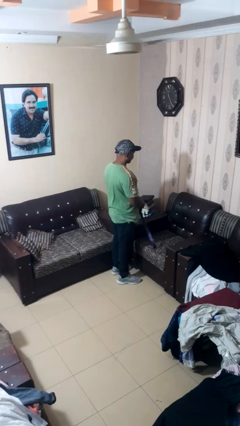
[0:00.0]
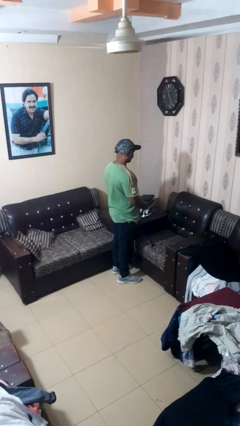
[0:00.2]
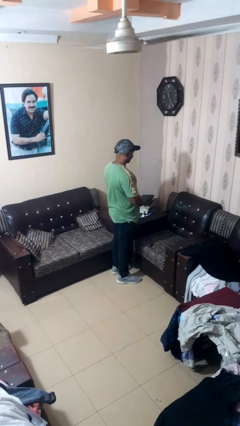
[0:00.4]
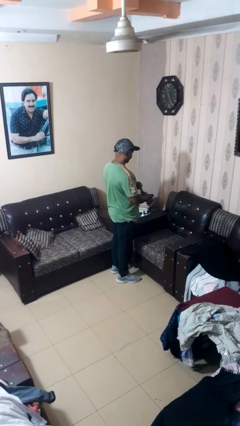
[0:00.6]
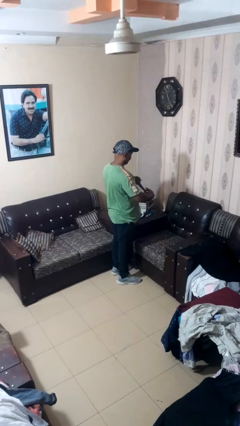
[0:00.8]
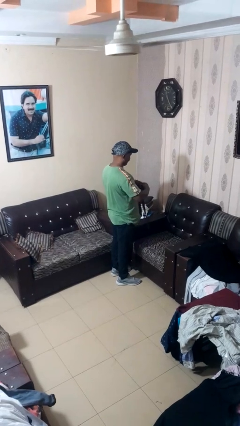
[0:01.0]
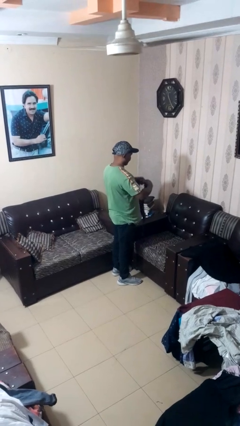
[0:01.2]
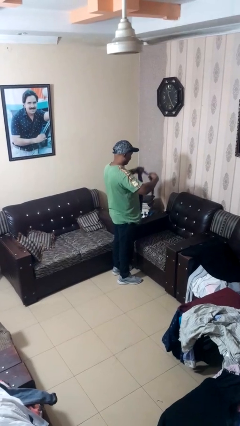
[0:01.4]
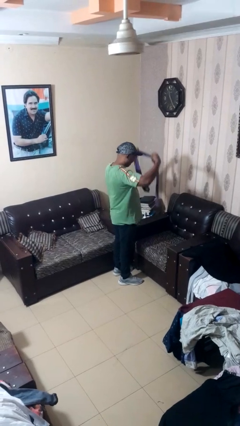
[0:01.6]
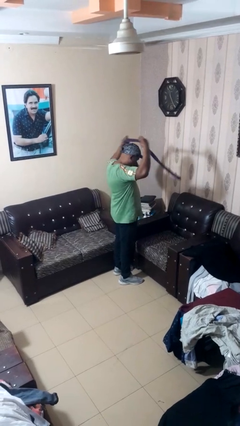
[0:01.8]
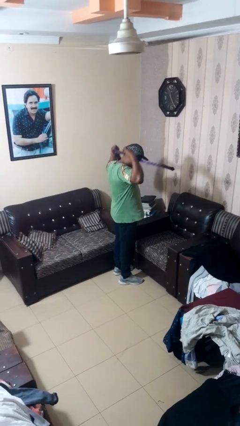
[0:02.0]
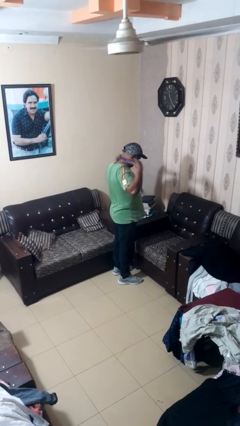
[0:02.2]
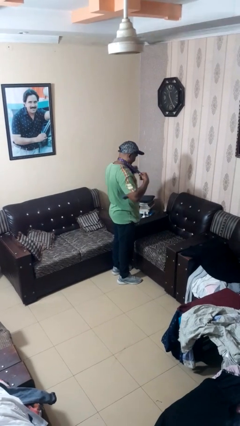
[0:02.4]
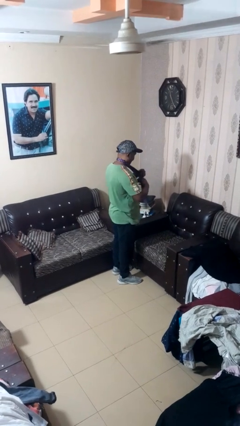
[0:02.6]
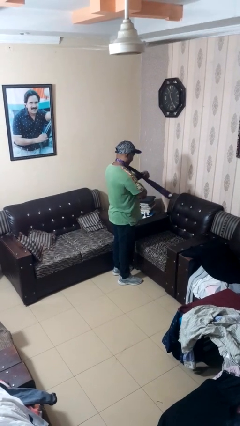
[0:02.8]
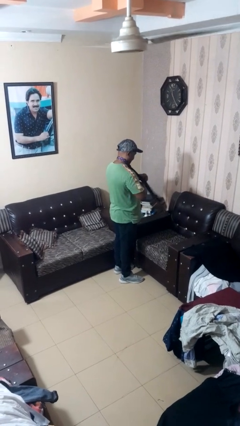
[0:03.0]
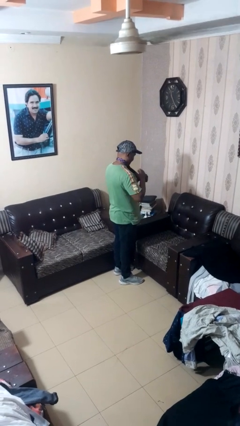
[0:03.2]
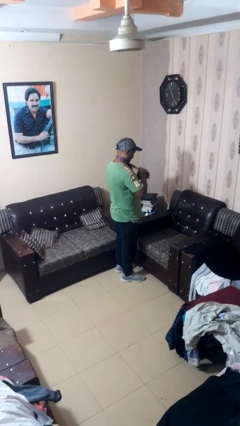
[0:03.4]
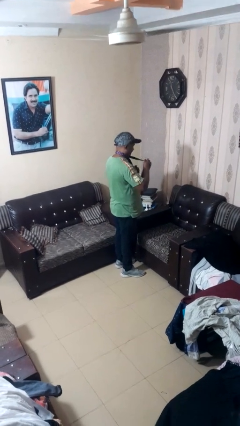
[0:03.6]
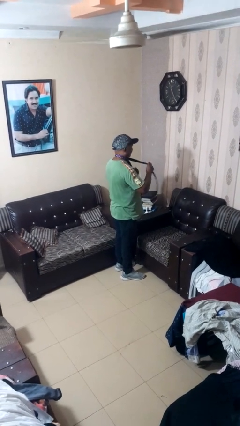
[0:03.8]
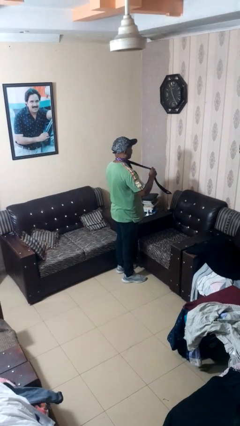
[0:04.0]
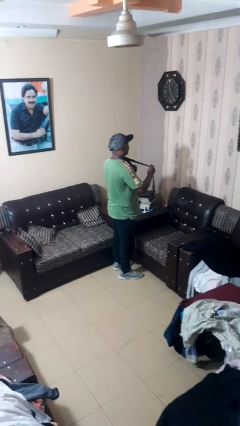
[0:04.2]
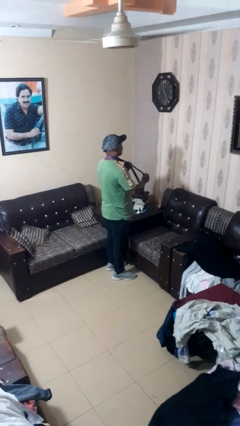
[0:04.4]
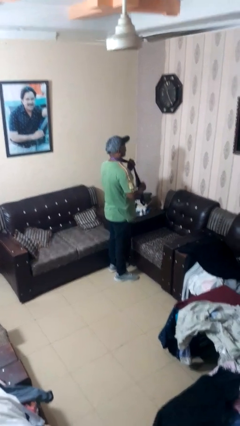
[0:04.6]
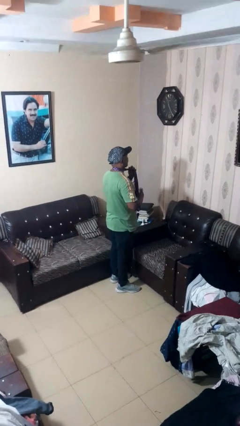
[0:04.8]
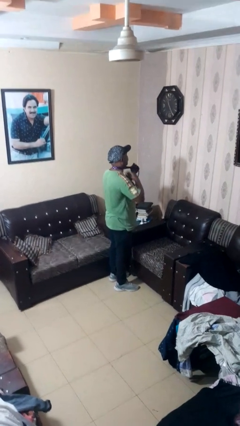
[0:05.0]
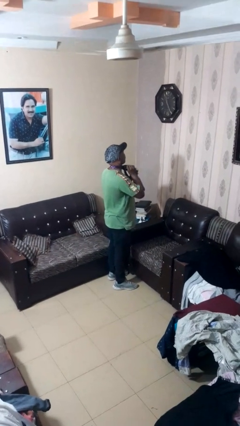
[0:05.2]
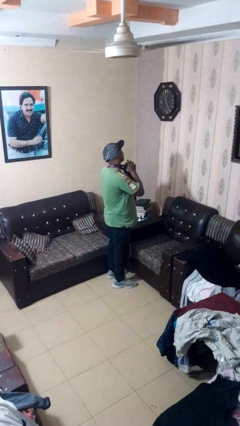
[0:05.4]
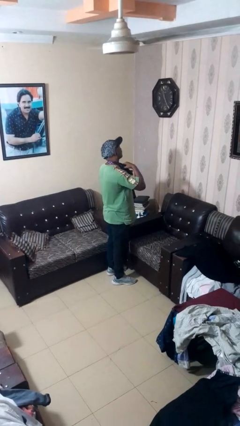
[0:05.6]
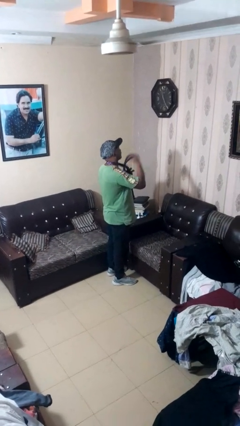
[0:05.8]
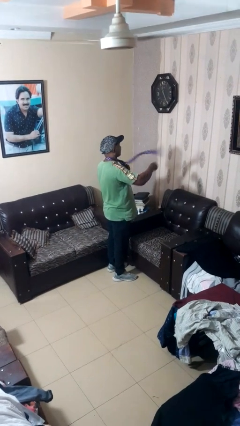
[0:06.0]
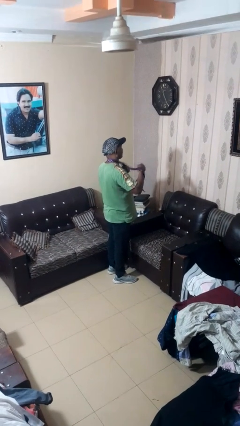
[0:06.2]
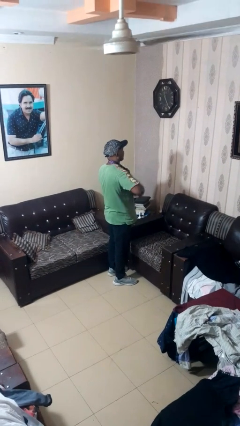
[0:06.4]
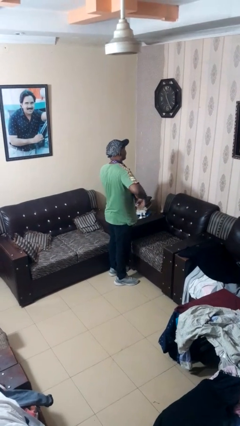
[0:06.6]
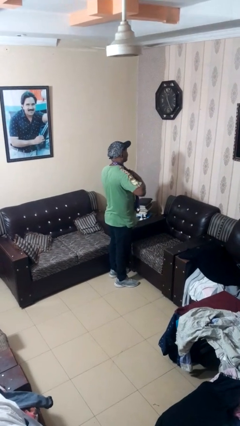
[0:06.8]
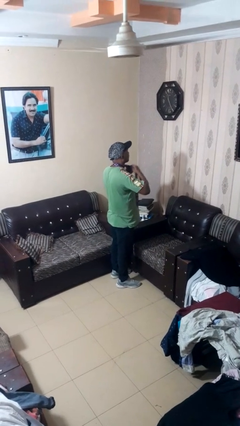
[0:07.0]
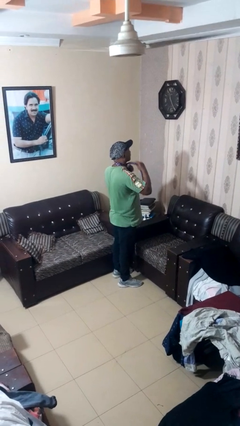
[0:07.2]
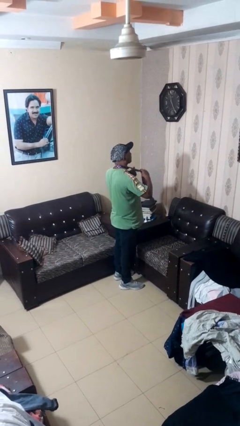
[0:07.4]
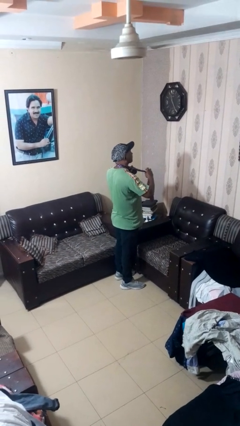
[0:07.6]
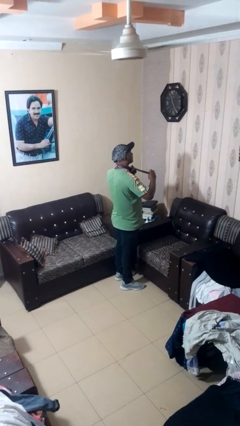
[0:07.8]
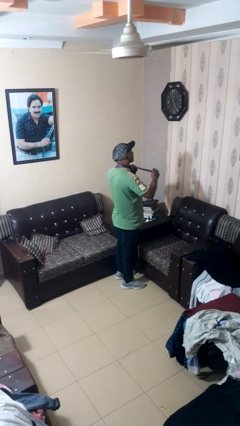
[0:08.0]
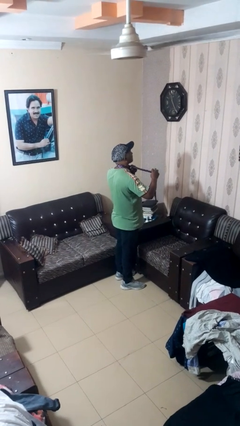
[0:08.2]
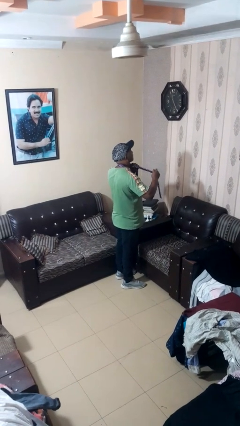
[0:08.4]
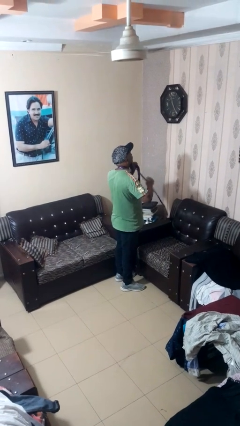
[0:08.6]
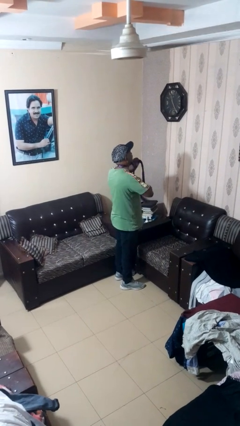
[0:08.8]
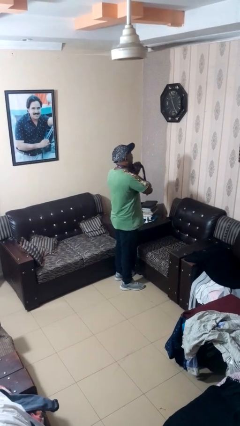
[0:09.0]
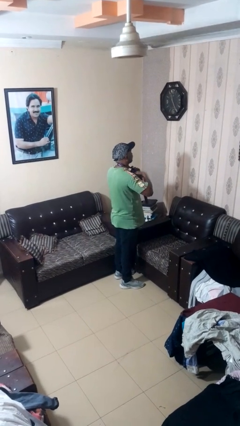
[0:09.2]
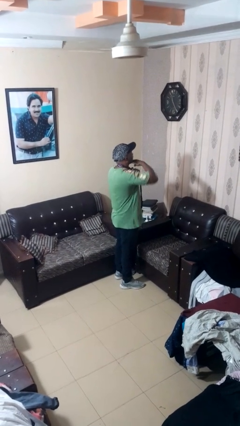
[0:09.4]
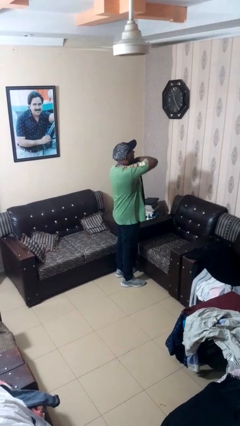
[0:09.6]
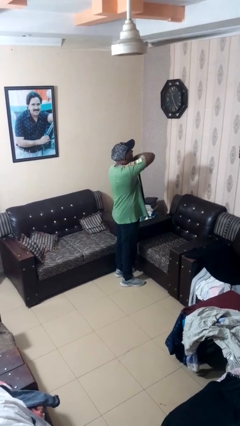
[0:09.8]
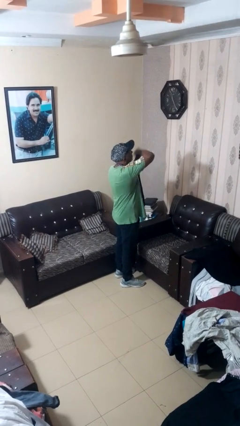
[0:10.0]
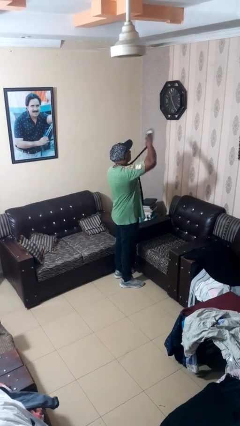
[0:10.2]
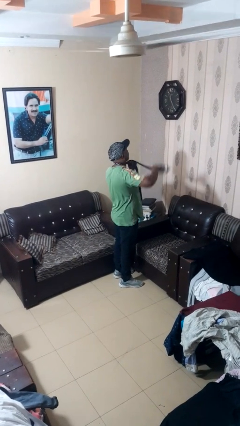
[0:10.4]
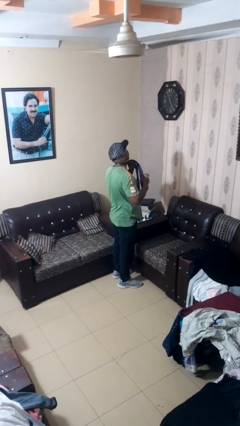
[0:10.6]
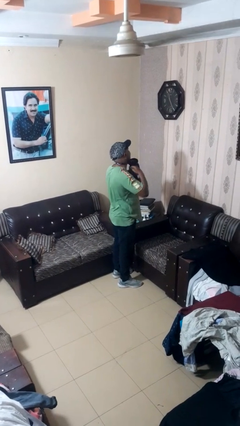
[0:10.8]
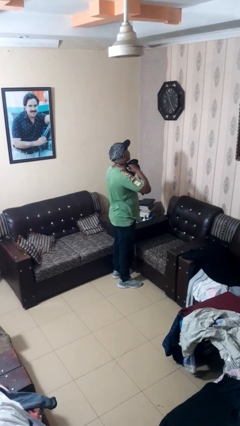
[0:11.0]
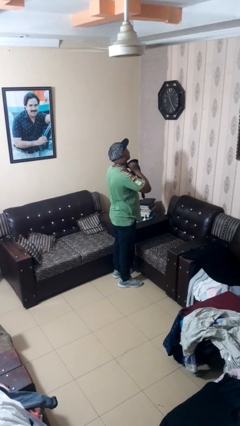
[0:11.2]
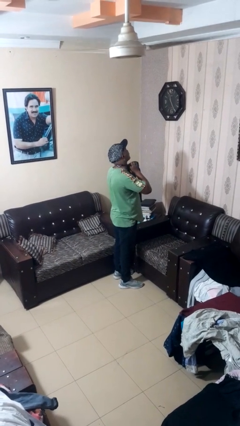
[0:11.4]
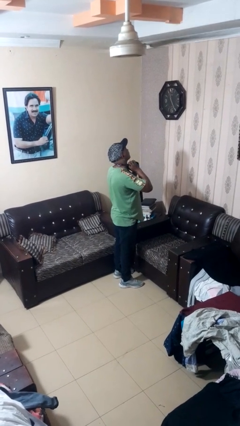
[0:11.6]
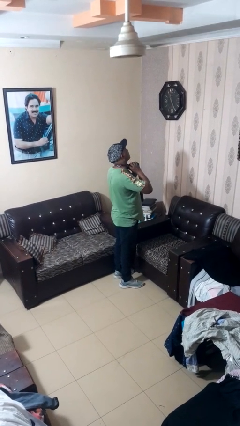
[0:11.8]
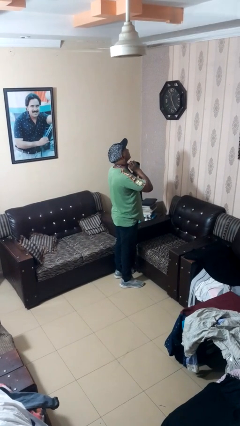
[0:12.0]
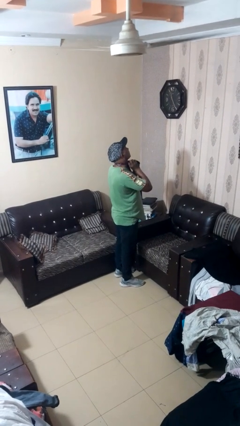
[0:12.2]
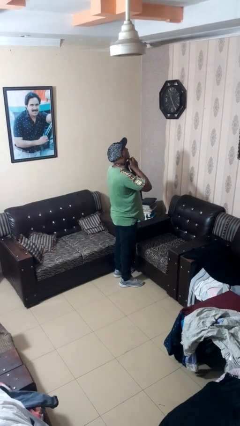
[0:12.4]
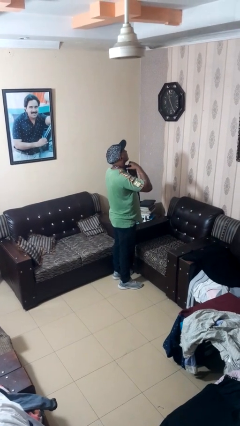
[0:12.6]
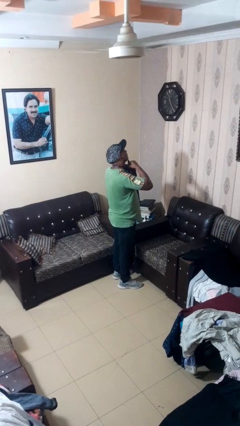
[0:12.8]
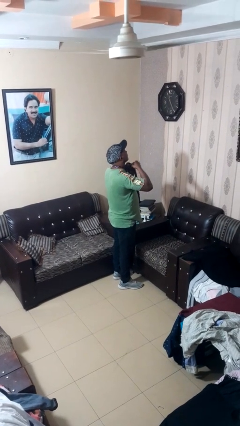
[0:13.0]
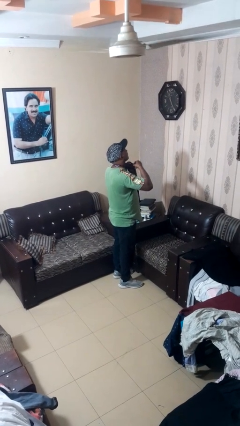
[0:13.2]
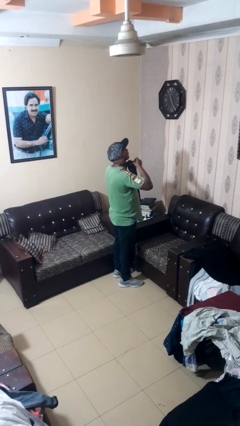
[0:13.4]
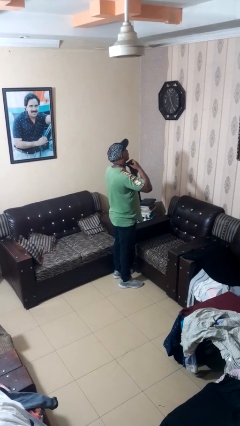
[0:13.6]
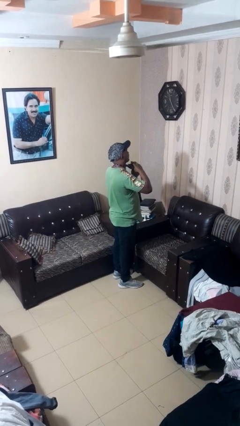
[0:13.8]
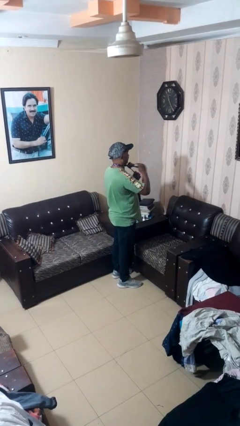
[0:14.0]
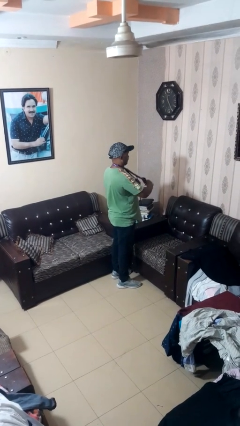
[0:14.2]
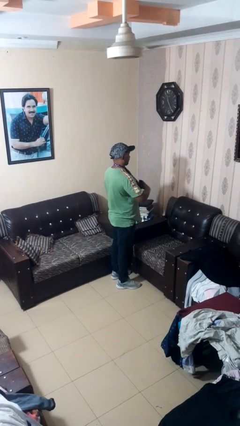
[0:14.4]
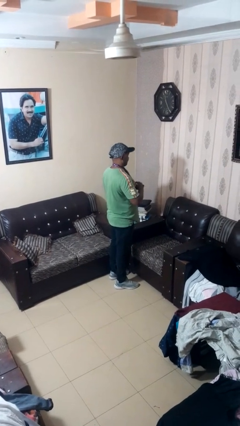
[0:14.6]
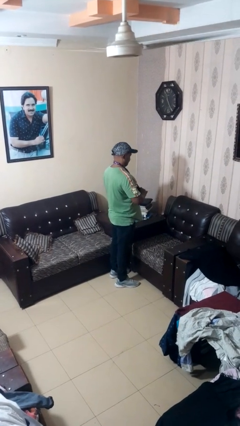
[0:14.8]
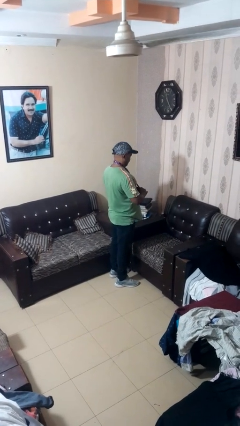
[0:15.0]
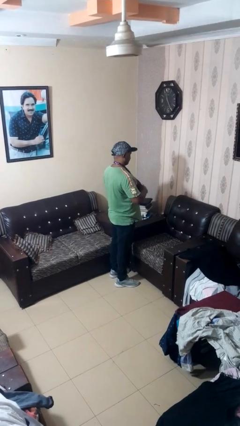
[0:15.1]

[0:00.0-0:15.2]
person puts on necktie

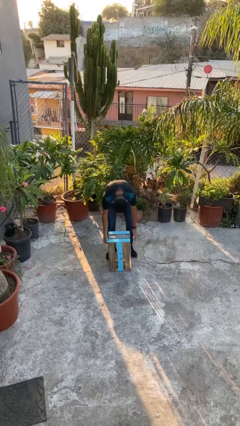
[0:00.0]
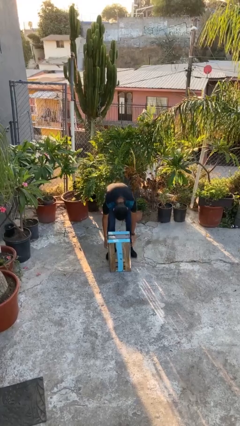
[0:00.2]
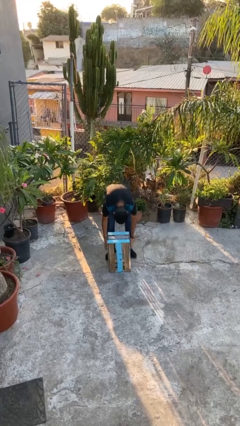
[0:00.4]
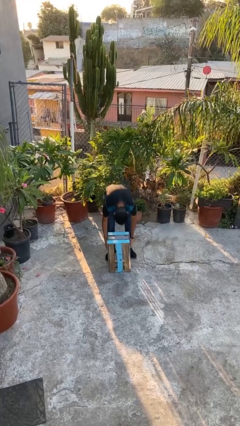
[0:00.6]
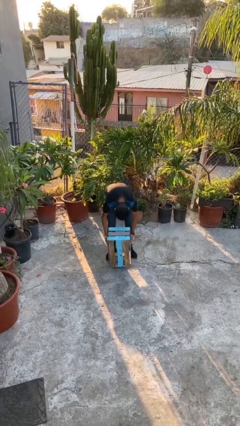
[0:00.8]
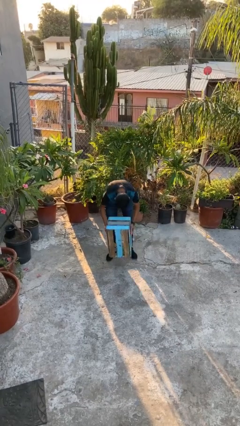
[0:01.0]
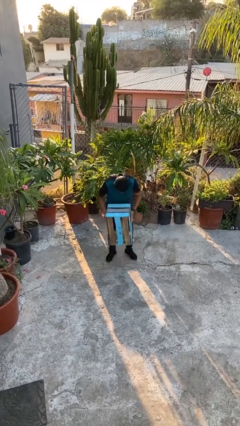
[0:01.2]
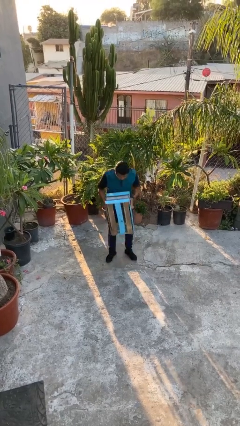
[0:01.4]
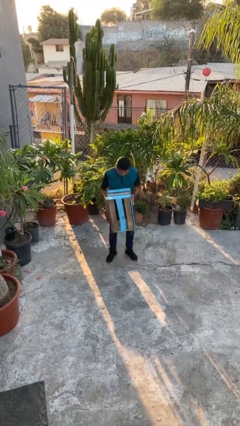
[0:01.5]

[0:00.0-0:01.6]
person picks up object from floor

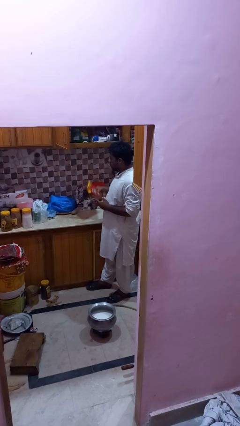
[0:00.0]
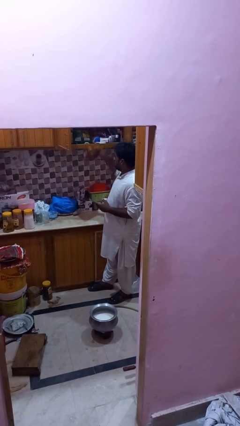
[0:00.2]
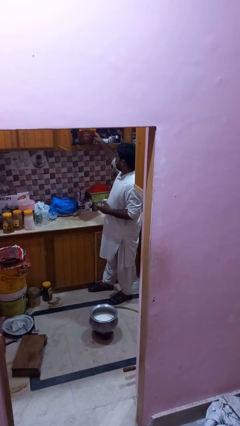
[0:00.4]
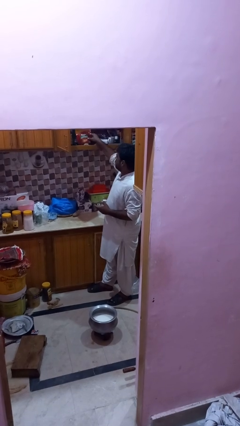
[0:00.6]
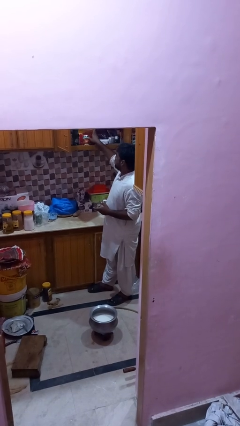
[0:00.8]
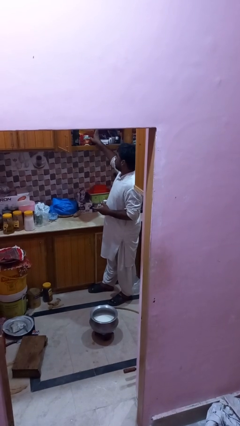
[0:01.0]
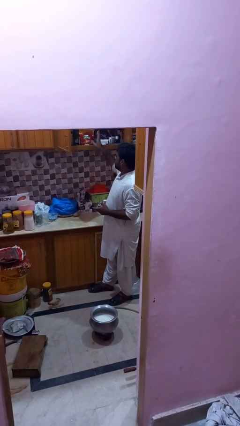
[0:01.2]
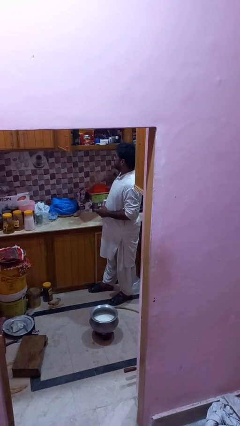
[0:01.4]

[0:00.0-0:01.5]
person puts down object into cabinet
